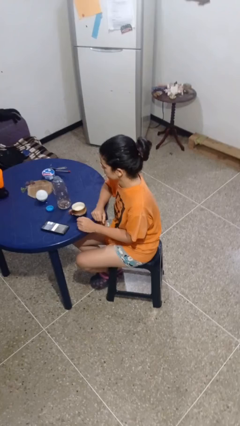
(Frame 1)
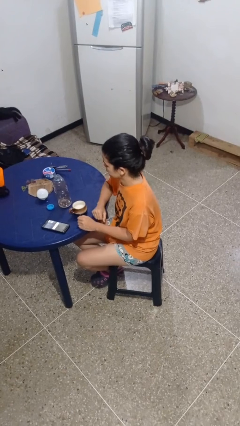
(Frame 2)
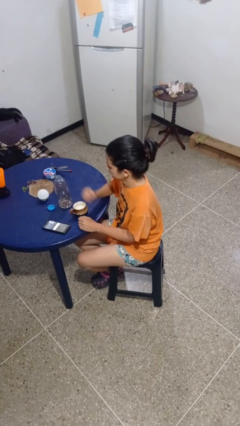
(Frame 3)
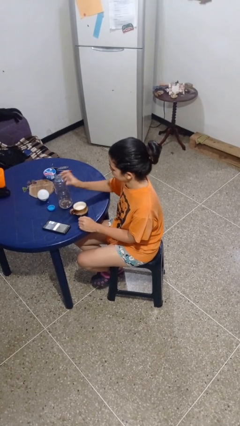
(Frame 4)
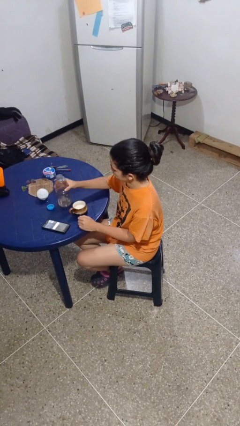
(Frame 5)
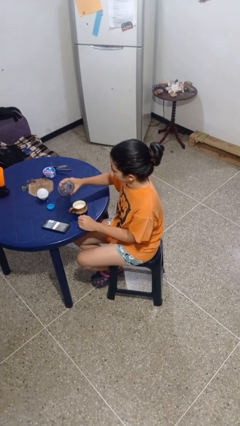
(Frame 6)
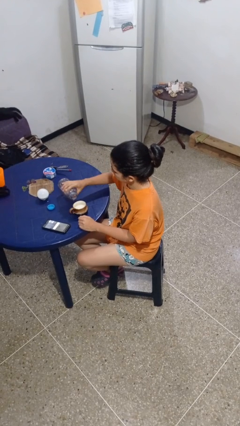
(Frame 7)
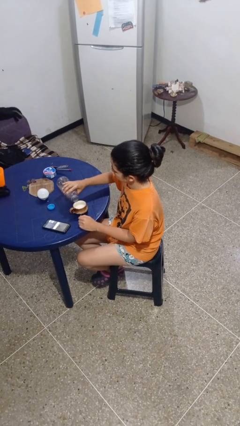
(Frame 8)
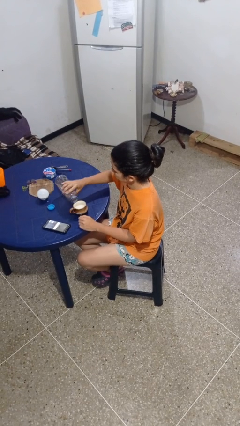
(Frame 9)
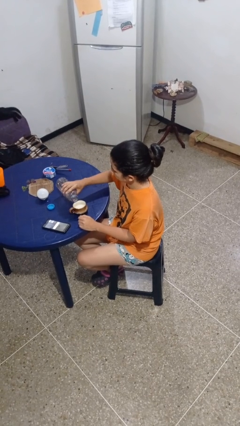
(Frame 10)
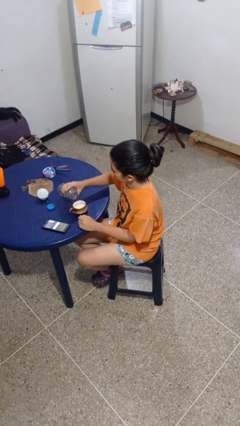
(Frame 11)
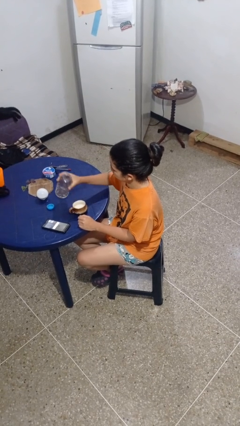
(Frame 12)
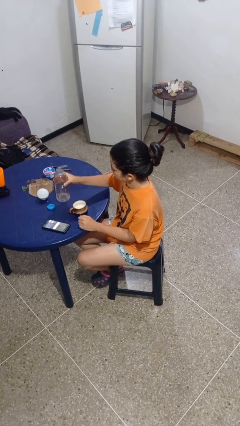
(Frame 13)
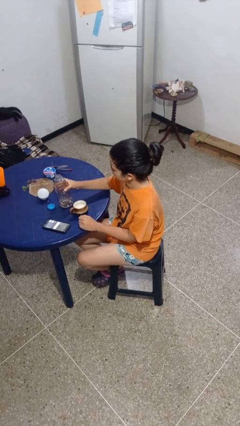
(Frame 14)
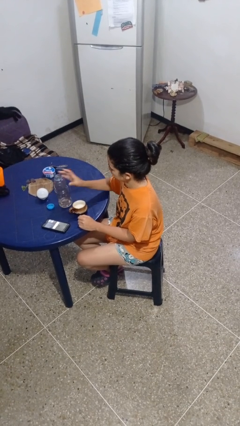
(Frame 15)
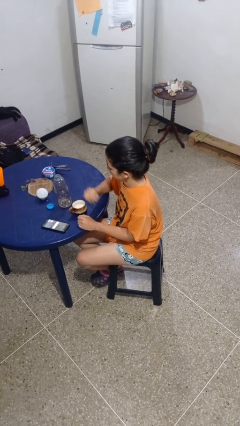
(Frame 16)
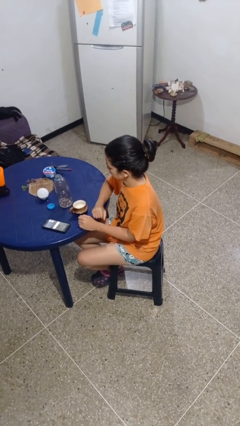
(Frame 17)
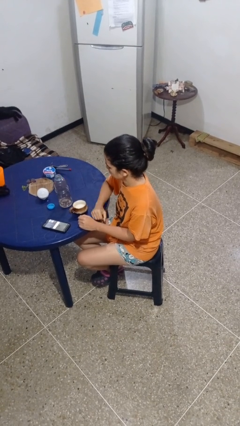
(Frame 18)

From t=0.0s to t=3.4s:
person pours liquid into cup

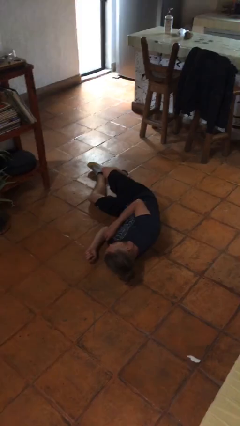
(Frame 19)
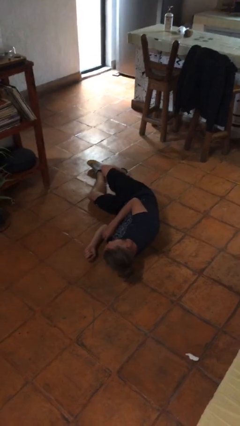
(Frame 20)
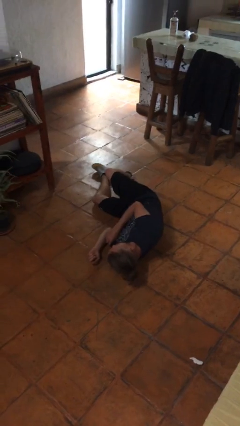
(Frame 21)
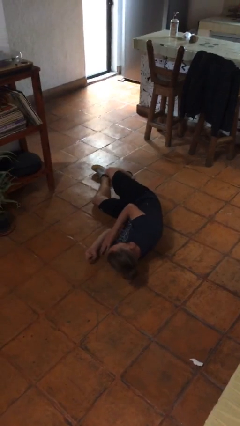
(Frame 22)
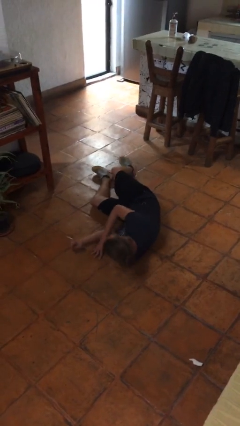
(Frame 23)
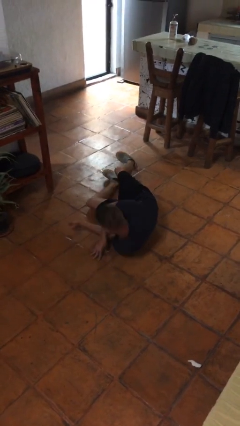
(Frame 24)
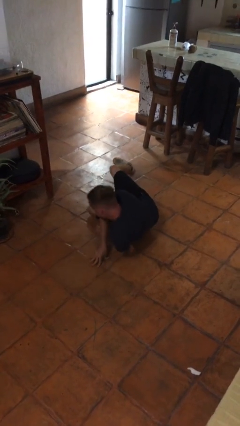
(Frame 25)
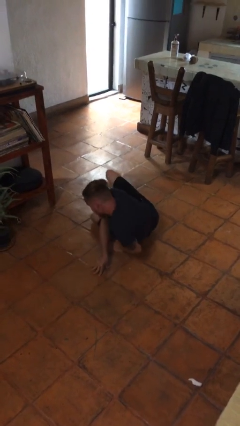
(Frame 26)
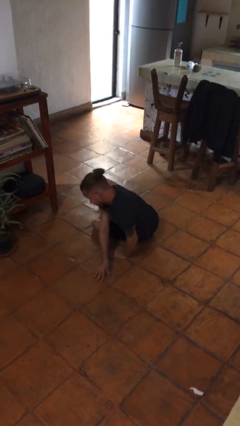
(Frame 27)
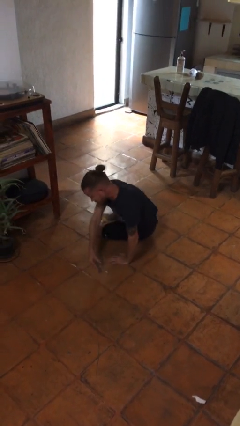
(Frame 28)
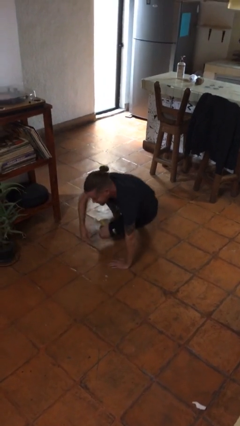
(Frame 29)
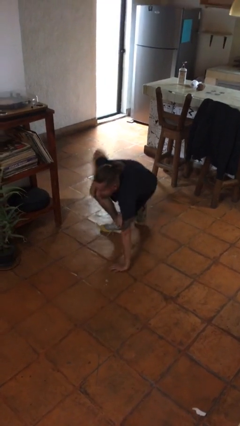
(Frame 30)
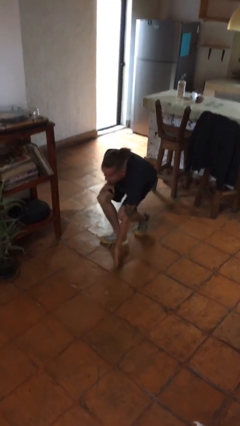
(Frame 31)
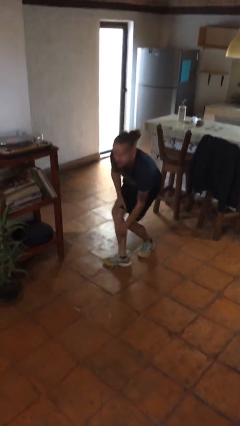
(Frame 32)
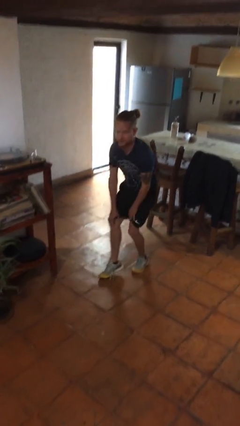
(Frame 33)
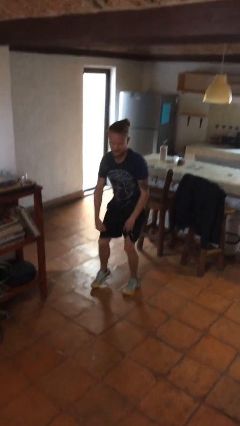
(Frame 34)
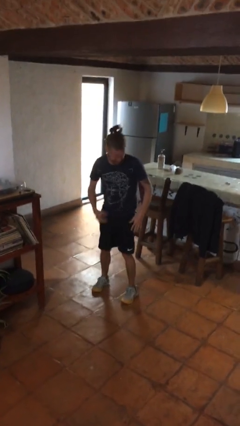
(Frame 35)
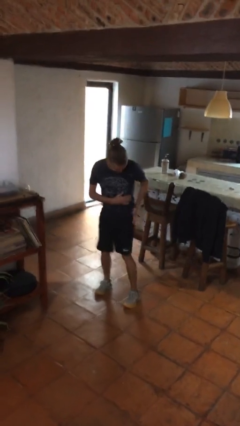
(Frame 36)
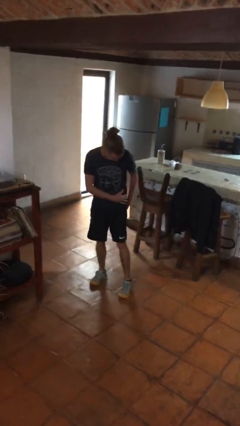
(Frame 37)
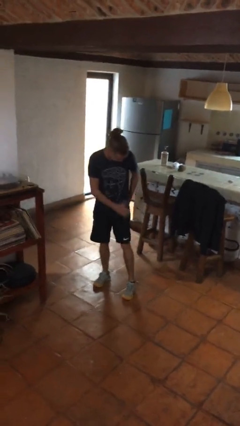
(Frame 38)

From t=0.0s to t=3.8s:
person stands up from floor

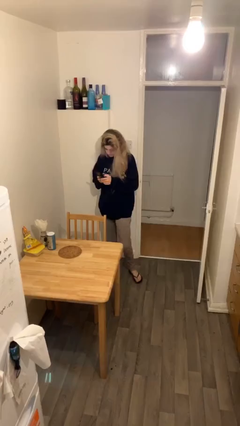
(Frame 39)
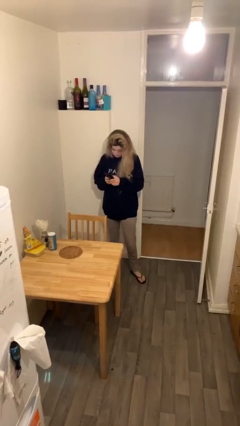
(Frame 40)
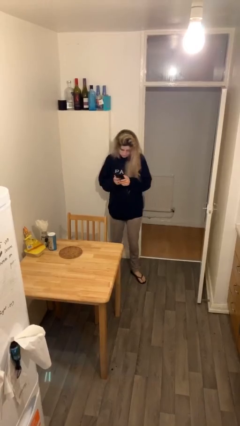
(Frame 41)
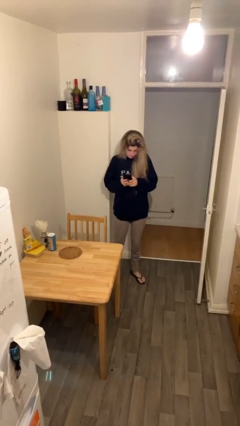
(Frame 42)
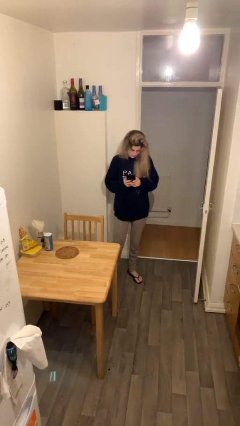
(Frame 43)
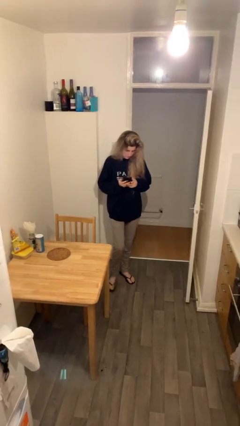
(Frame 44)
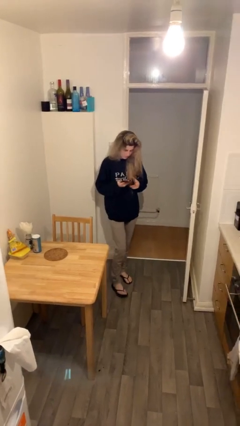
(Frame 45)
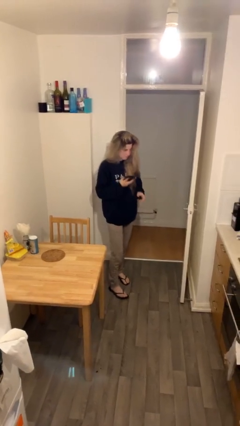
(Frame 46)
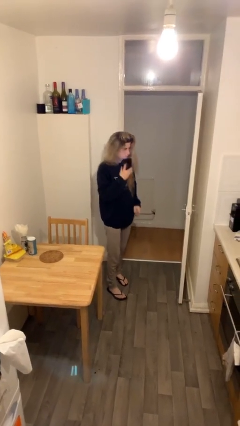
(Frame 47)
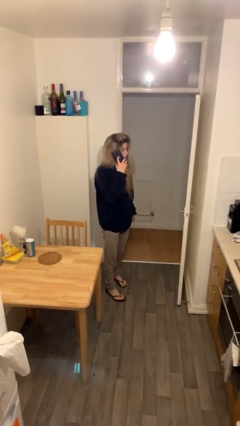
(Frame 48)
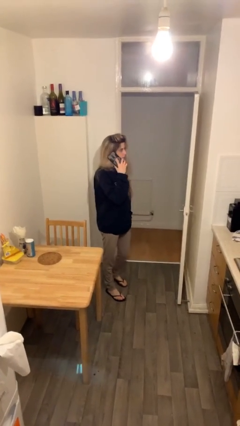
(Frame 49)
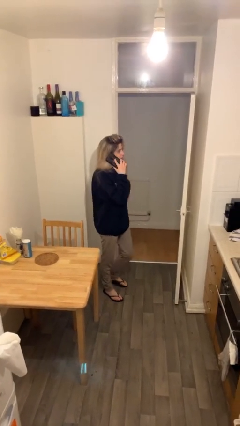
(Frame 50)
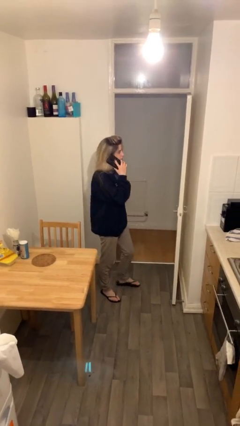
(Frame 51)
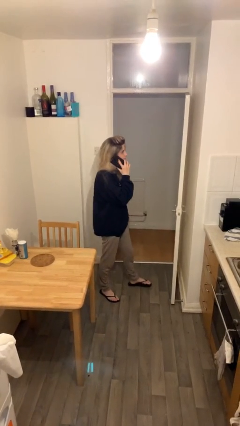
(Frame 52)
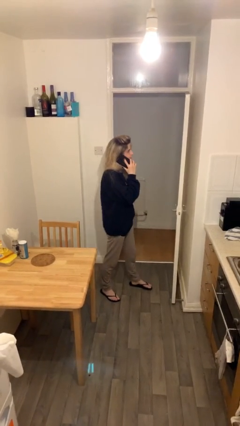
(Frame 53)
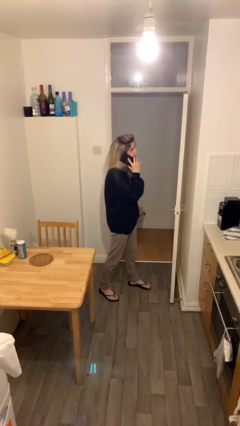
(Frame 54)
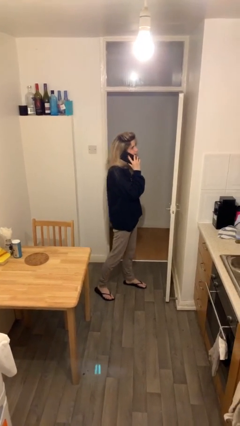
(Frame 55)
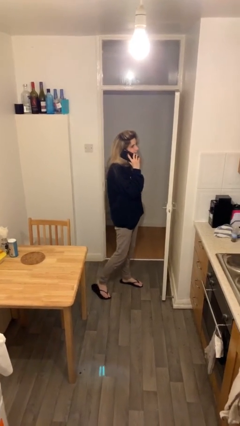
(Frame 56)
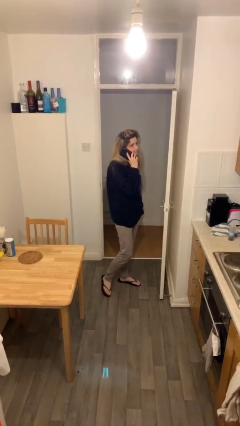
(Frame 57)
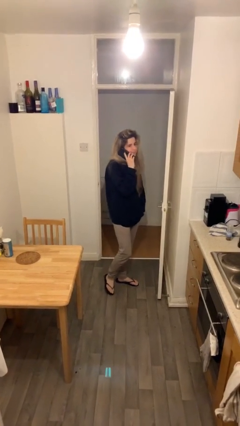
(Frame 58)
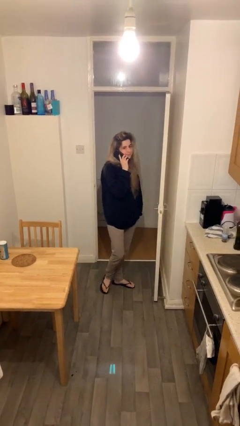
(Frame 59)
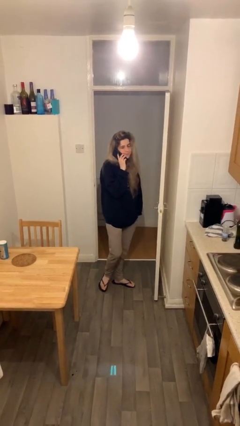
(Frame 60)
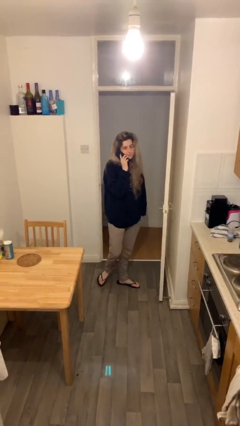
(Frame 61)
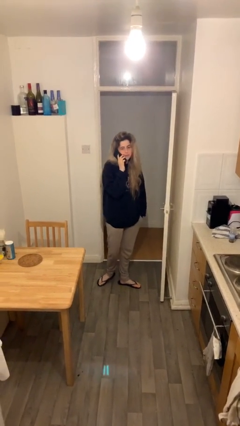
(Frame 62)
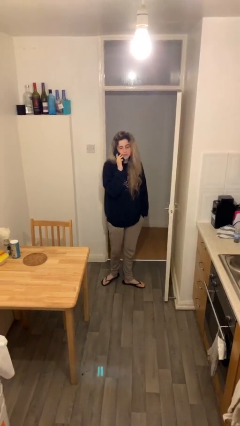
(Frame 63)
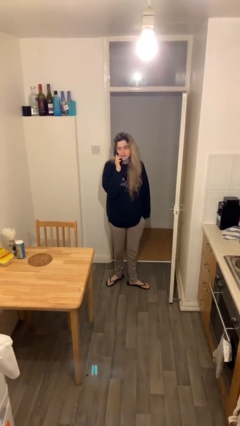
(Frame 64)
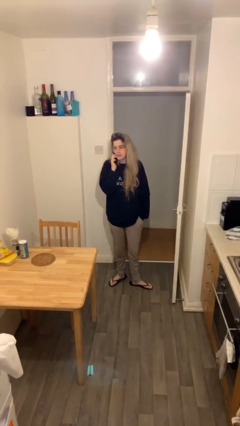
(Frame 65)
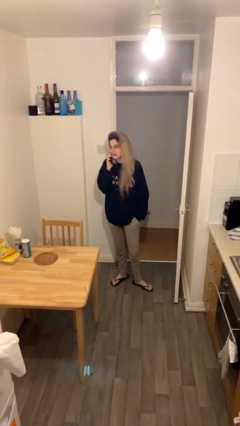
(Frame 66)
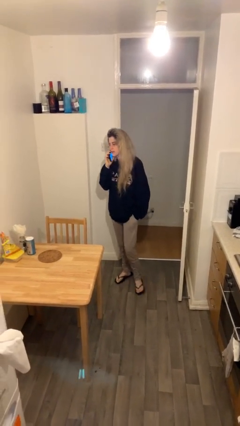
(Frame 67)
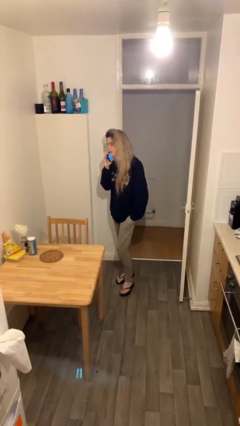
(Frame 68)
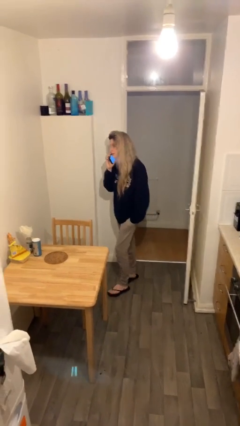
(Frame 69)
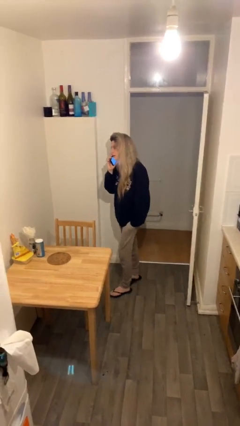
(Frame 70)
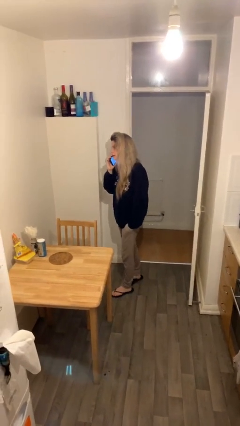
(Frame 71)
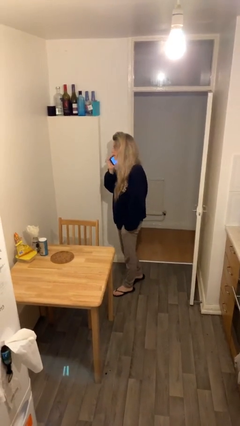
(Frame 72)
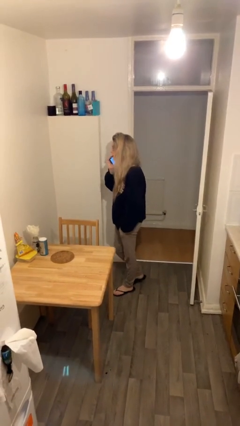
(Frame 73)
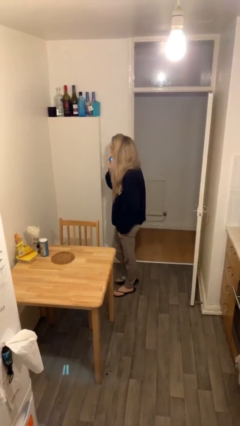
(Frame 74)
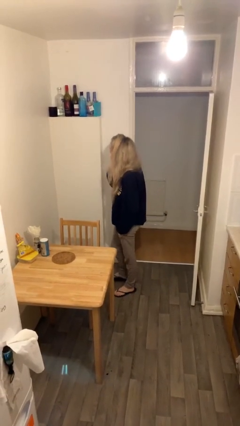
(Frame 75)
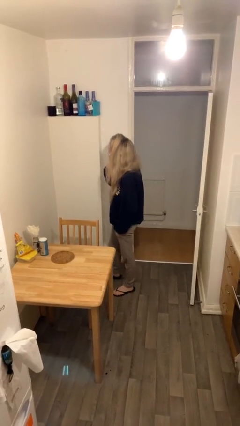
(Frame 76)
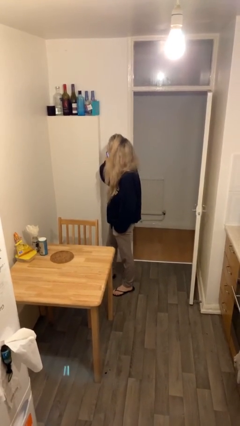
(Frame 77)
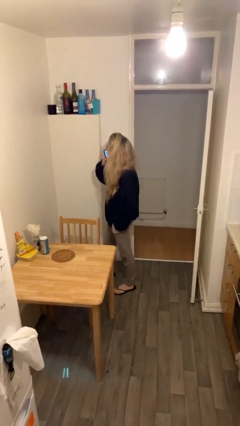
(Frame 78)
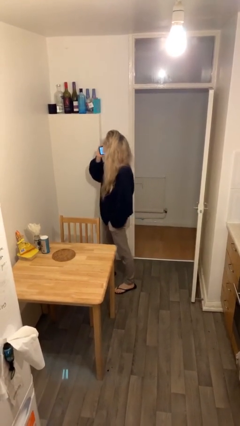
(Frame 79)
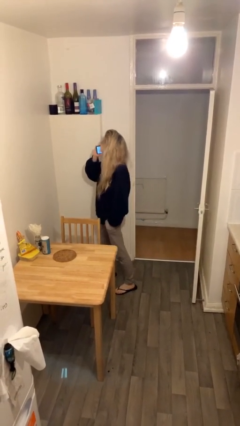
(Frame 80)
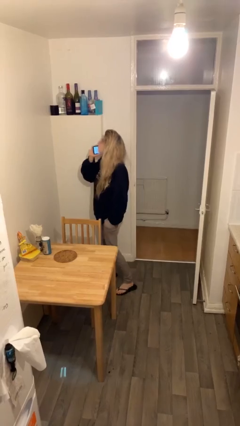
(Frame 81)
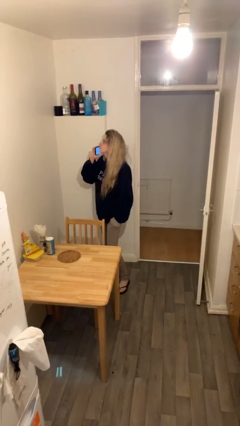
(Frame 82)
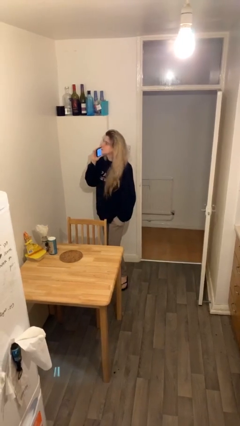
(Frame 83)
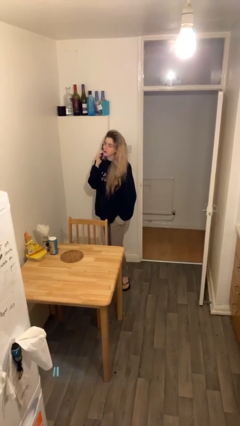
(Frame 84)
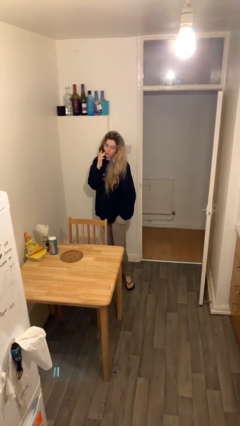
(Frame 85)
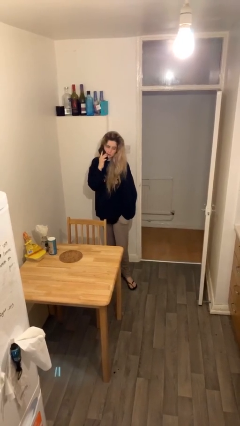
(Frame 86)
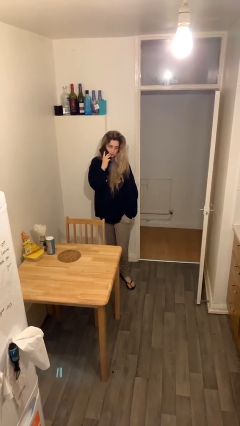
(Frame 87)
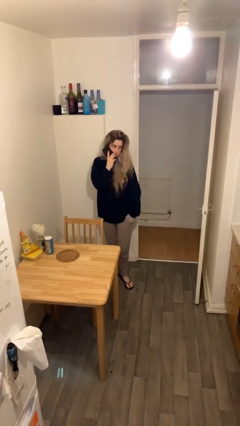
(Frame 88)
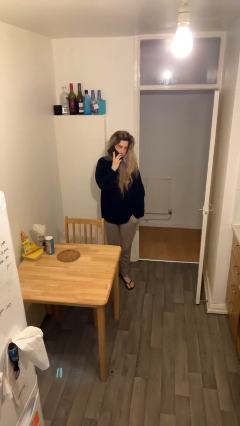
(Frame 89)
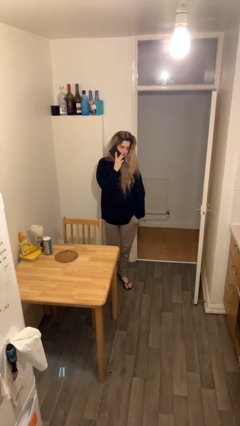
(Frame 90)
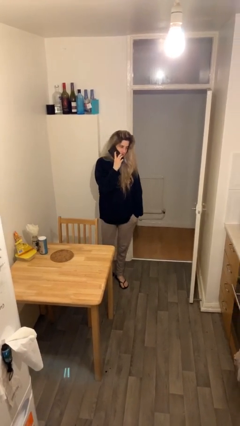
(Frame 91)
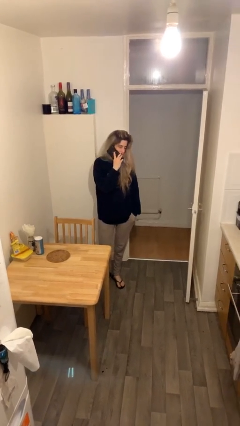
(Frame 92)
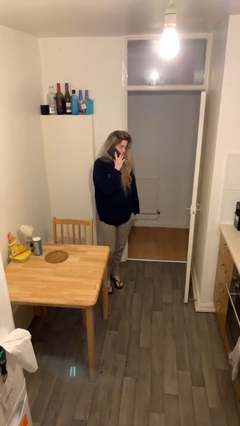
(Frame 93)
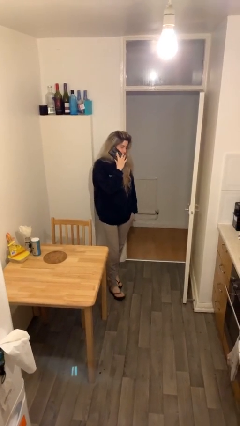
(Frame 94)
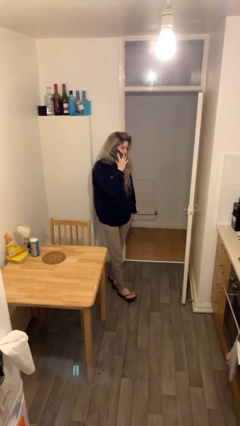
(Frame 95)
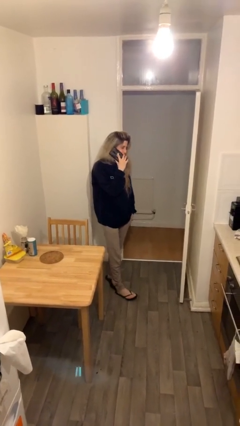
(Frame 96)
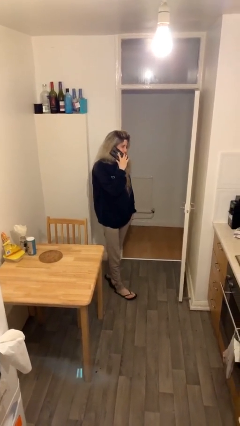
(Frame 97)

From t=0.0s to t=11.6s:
person talks on phone
